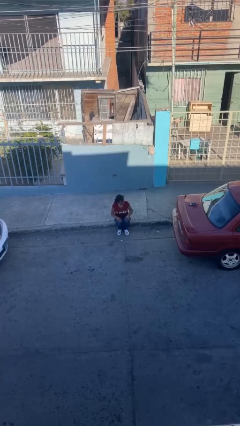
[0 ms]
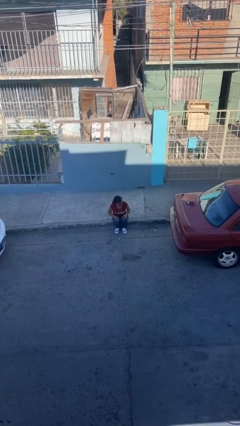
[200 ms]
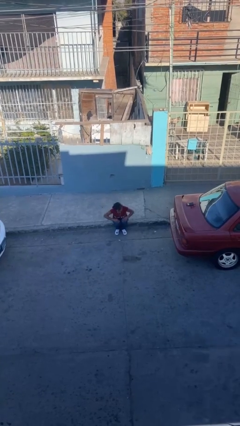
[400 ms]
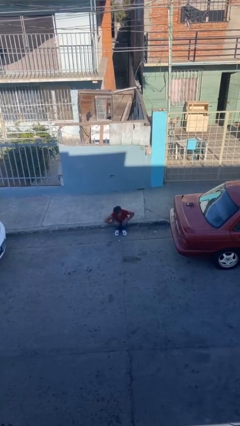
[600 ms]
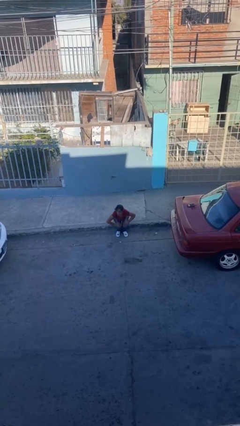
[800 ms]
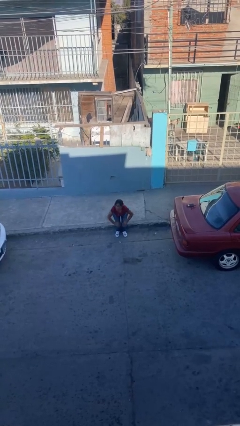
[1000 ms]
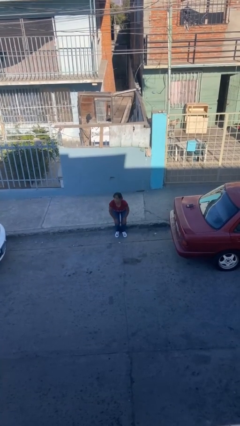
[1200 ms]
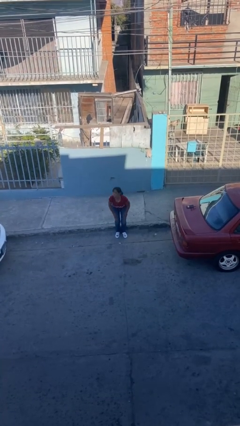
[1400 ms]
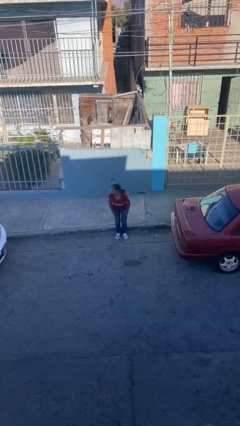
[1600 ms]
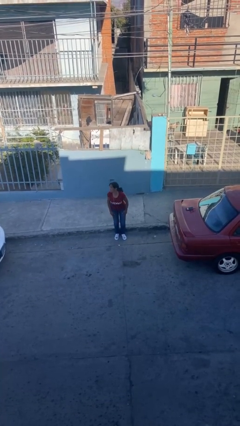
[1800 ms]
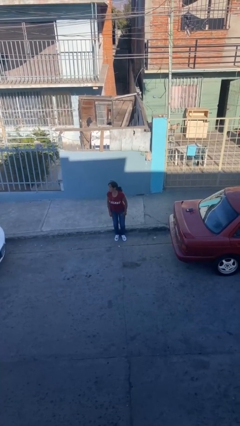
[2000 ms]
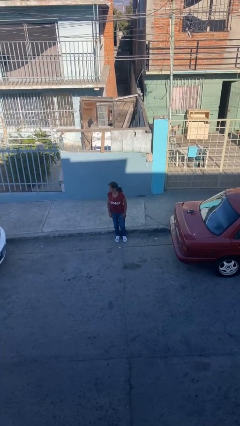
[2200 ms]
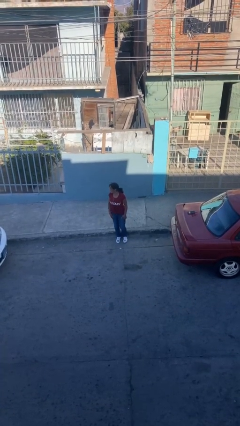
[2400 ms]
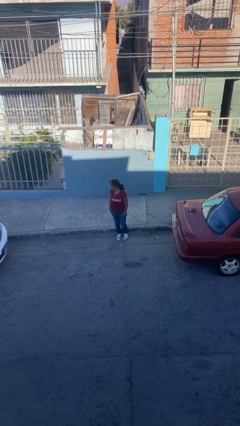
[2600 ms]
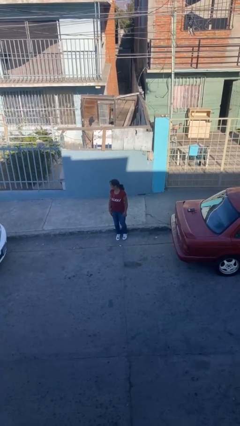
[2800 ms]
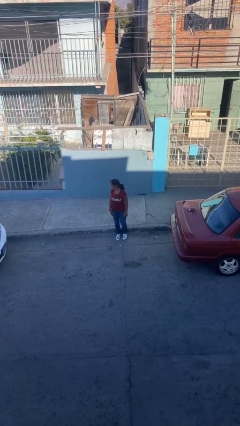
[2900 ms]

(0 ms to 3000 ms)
person stands up

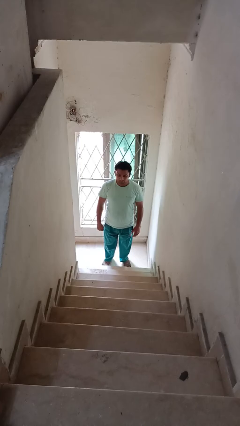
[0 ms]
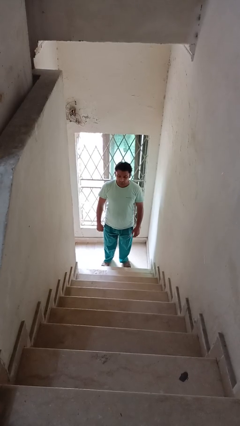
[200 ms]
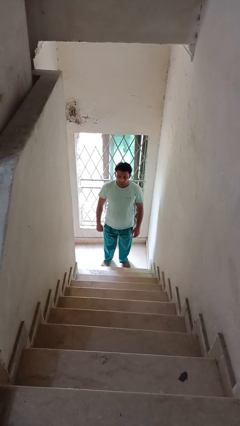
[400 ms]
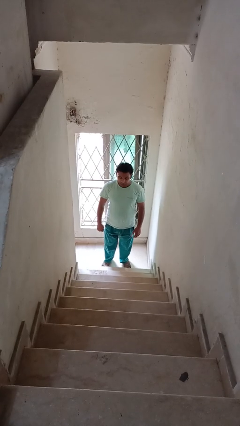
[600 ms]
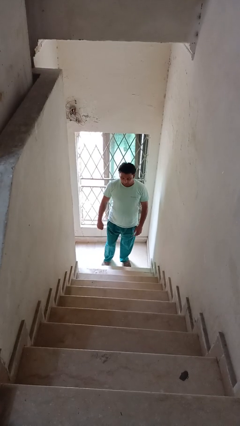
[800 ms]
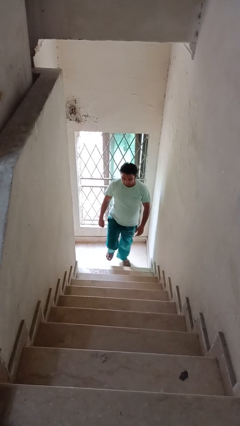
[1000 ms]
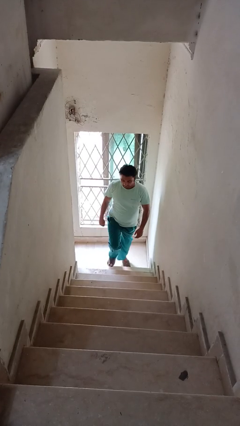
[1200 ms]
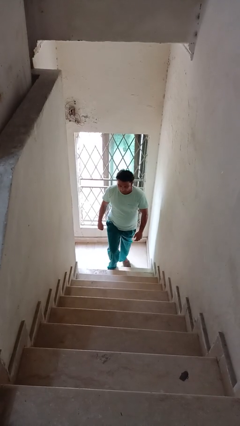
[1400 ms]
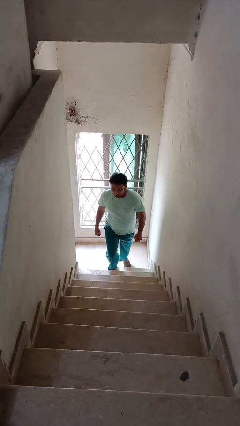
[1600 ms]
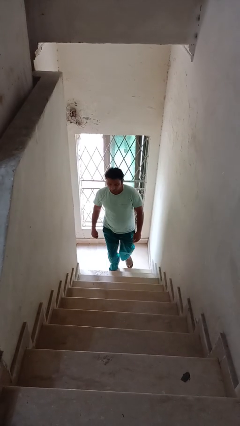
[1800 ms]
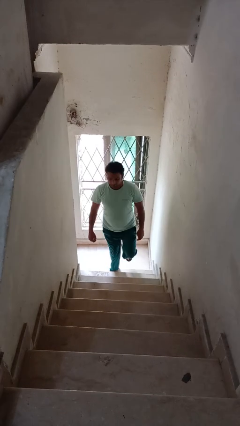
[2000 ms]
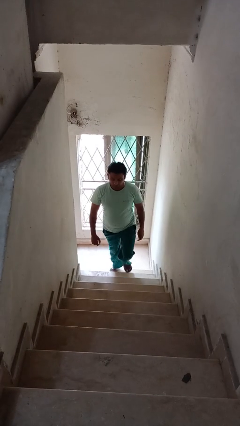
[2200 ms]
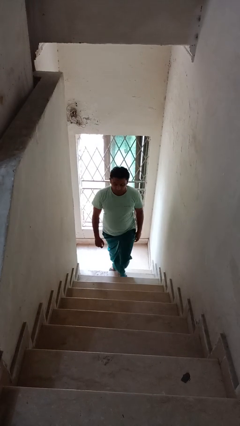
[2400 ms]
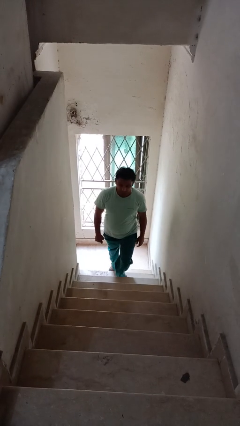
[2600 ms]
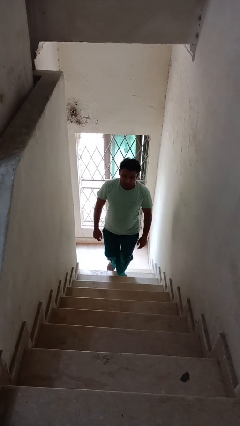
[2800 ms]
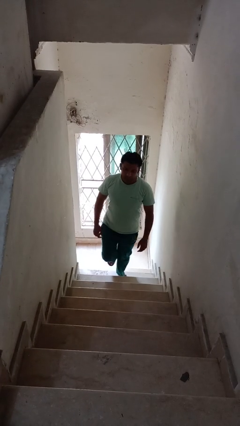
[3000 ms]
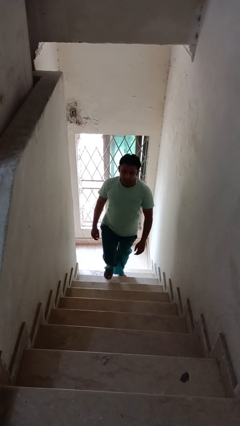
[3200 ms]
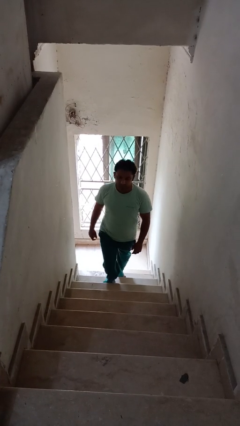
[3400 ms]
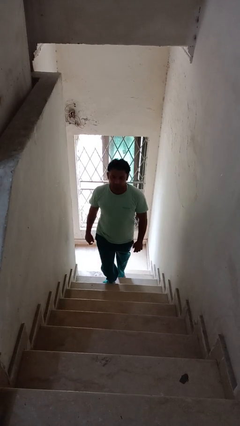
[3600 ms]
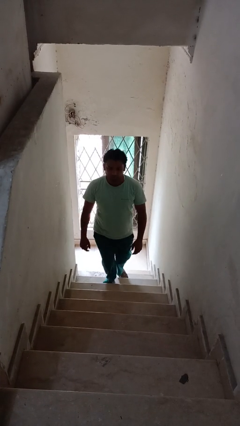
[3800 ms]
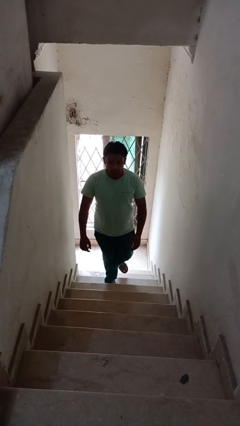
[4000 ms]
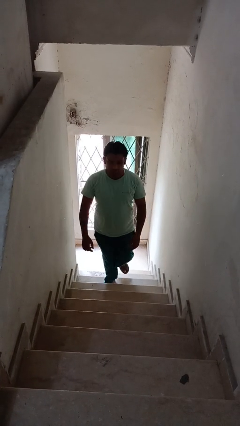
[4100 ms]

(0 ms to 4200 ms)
person climbs up stairs

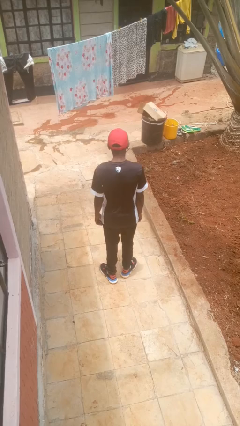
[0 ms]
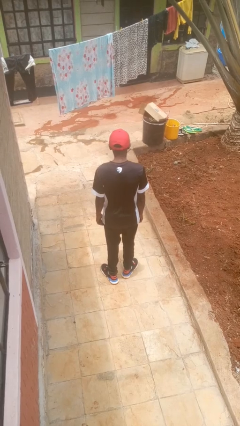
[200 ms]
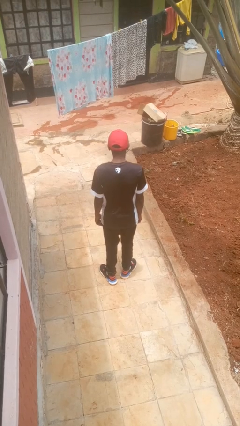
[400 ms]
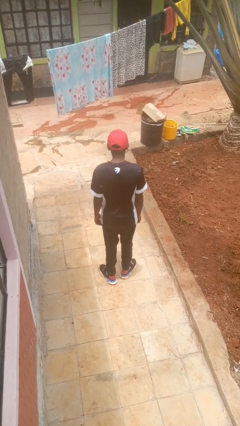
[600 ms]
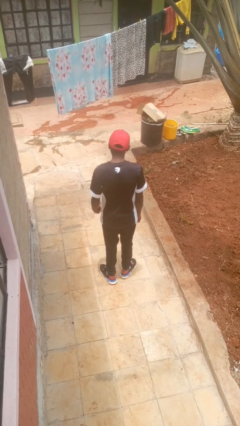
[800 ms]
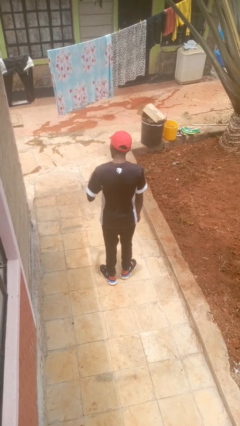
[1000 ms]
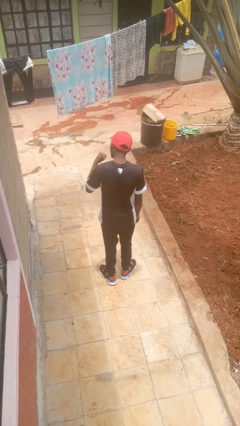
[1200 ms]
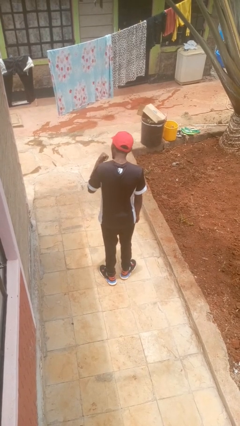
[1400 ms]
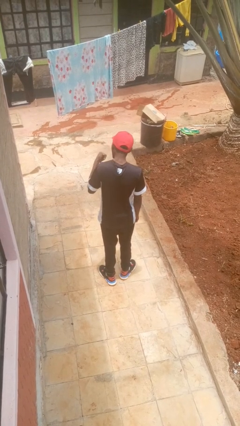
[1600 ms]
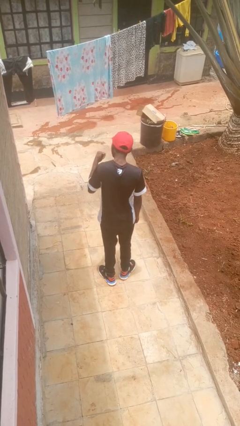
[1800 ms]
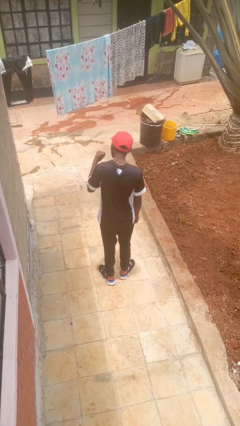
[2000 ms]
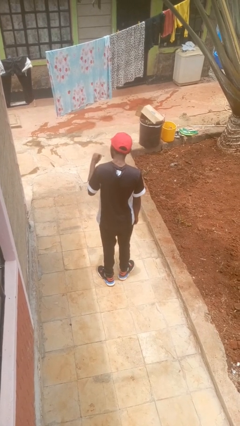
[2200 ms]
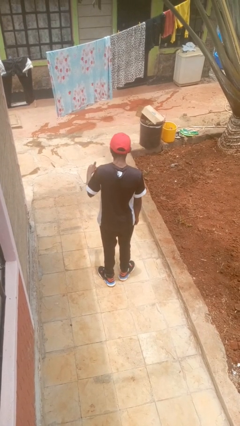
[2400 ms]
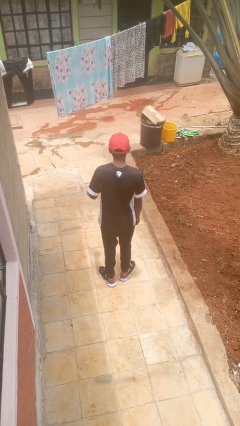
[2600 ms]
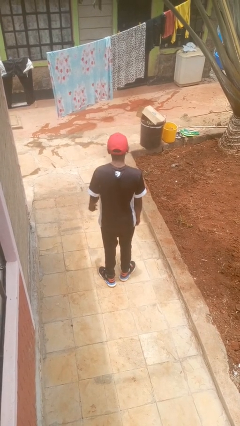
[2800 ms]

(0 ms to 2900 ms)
person gestures behind me

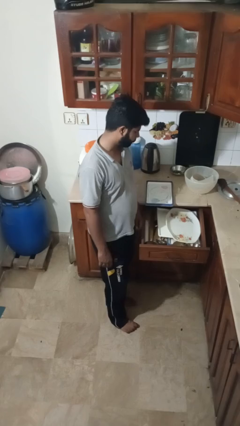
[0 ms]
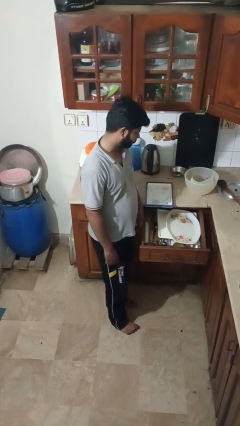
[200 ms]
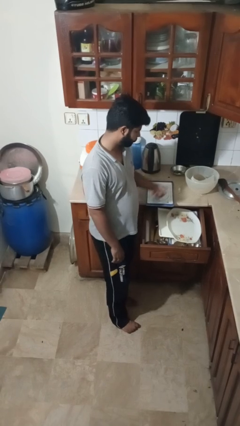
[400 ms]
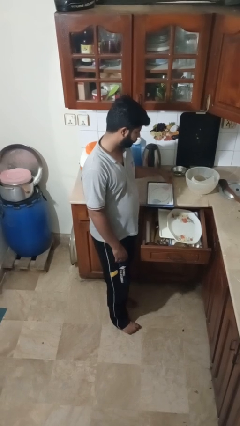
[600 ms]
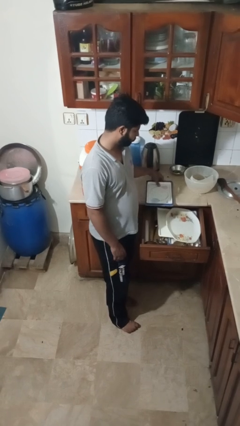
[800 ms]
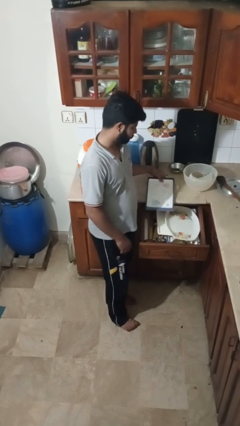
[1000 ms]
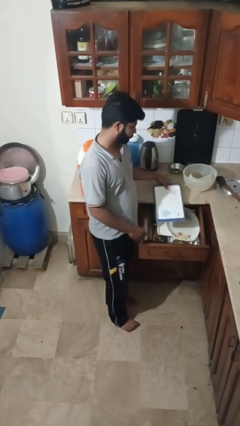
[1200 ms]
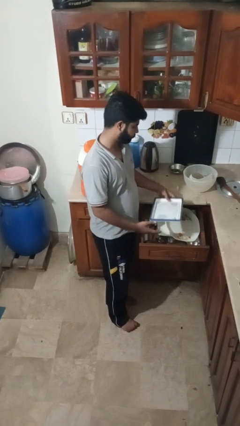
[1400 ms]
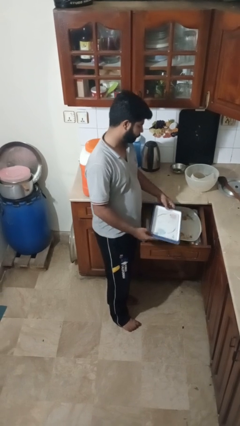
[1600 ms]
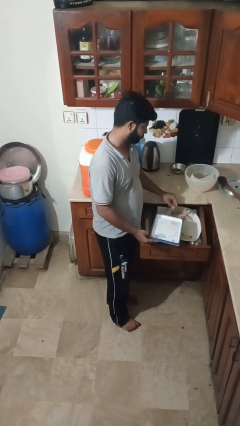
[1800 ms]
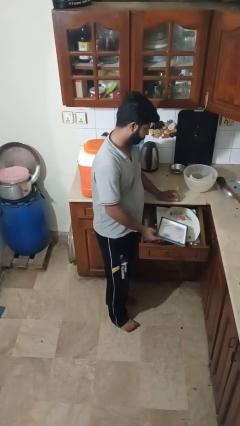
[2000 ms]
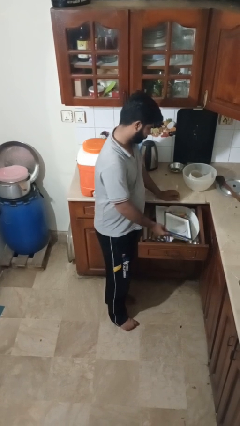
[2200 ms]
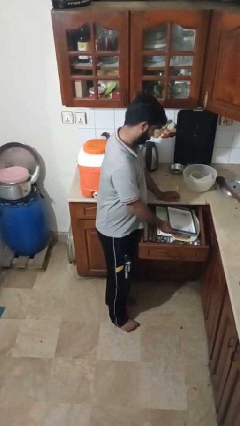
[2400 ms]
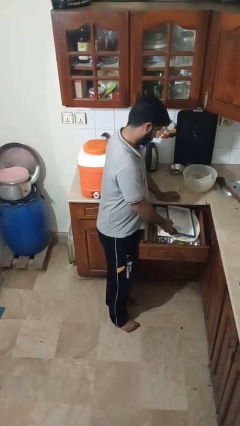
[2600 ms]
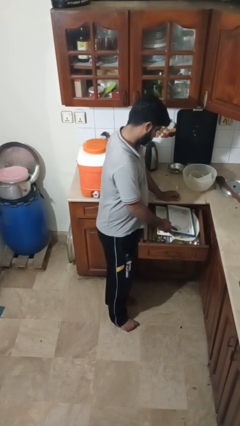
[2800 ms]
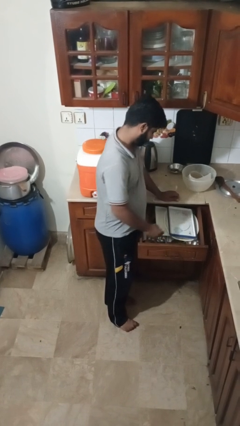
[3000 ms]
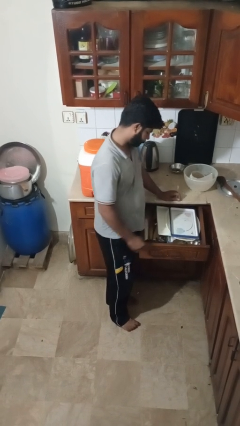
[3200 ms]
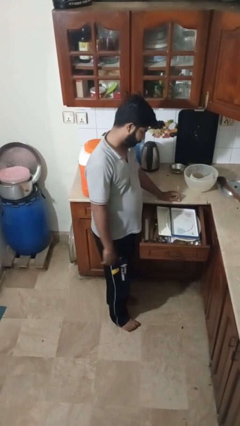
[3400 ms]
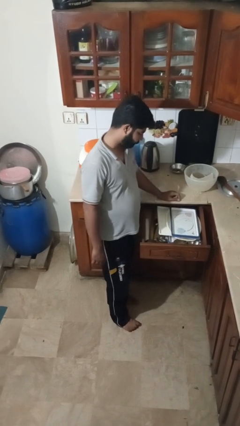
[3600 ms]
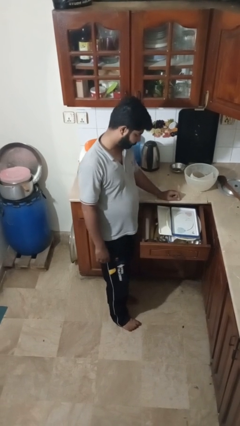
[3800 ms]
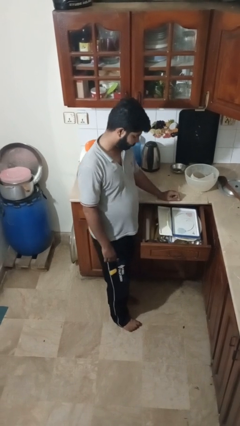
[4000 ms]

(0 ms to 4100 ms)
person puts object into kitchen drawer

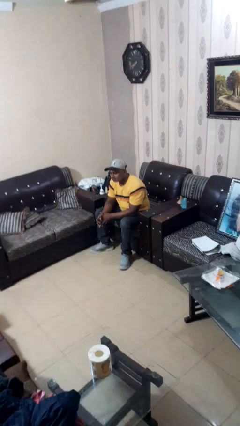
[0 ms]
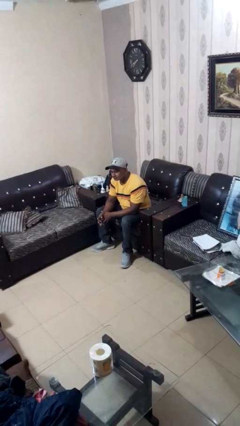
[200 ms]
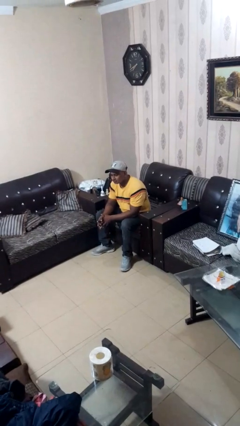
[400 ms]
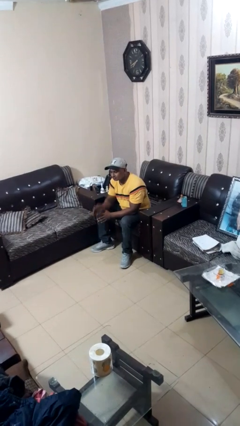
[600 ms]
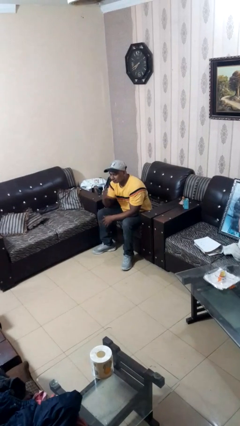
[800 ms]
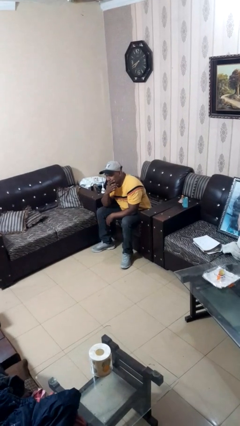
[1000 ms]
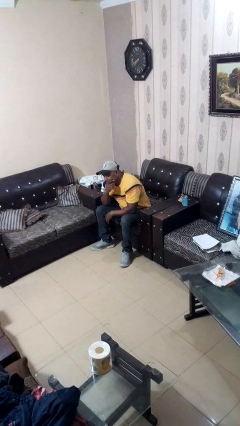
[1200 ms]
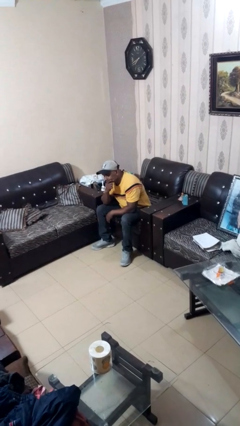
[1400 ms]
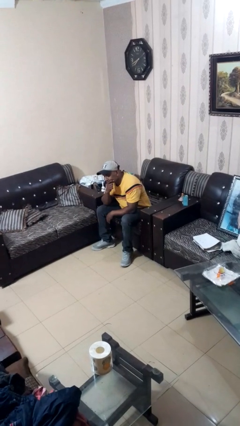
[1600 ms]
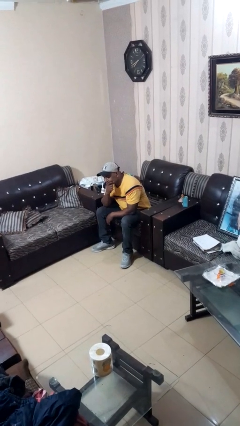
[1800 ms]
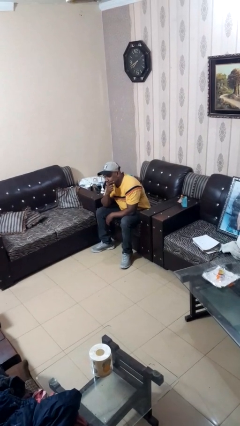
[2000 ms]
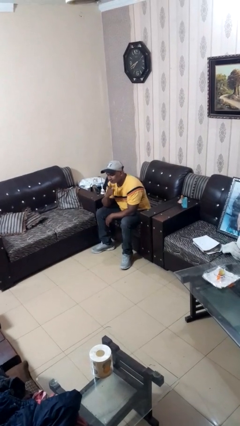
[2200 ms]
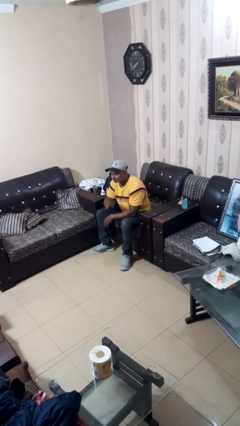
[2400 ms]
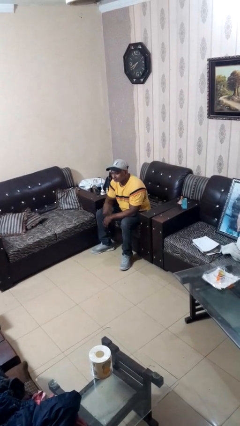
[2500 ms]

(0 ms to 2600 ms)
person strokes chin

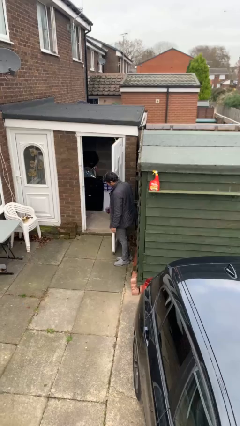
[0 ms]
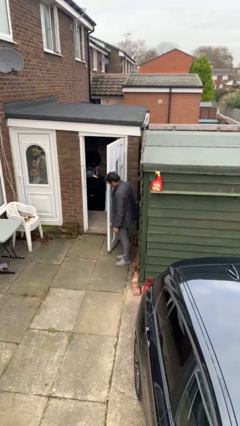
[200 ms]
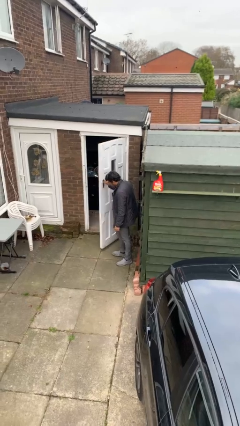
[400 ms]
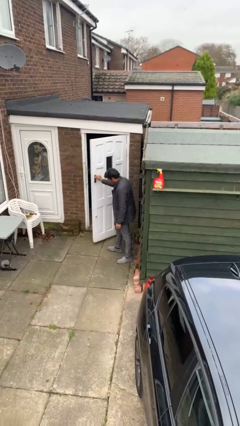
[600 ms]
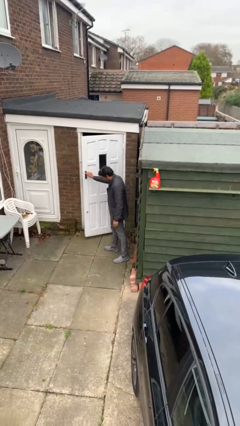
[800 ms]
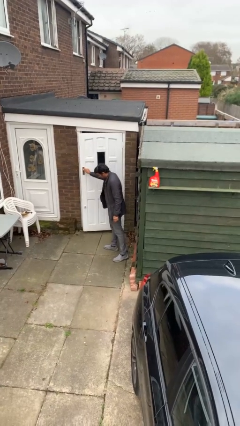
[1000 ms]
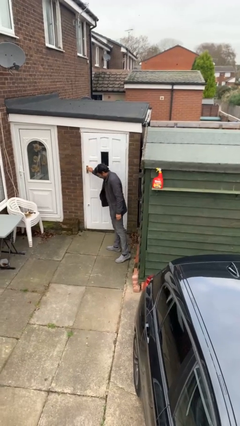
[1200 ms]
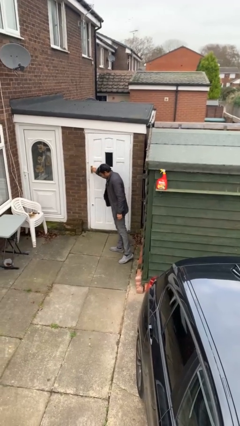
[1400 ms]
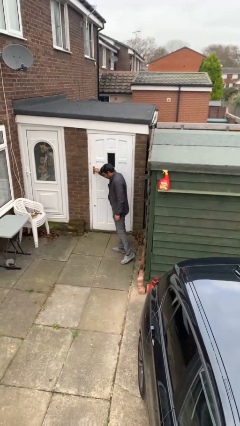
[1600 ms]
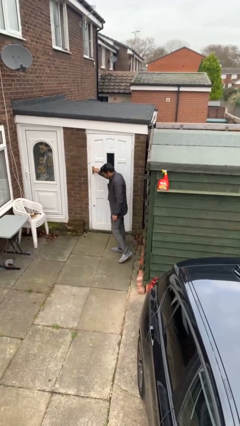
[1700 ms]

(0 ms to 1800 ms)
person closes facility door
